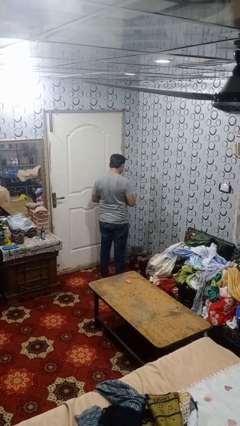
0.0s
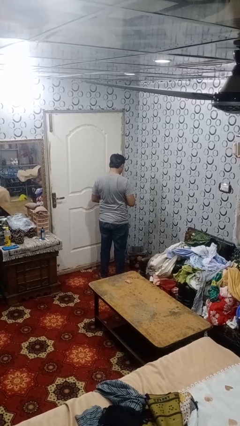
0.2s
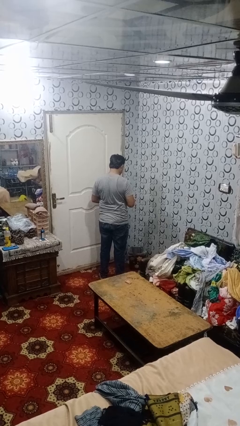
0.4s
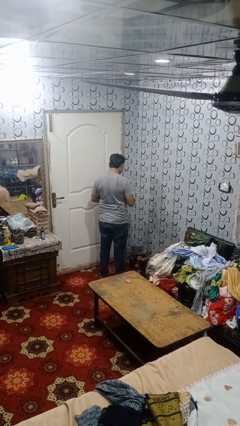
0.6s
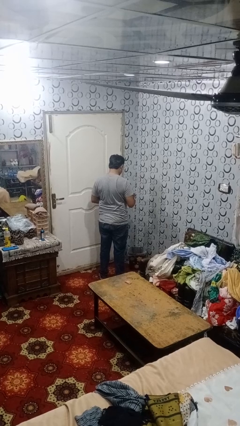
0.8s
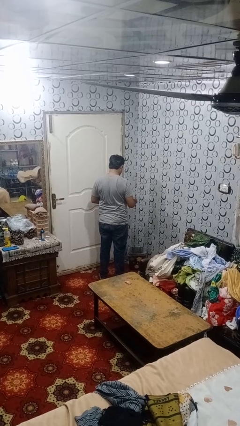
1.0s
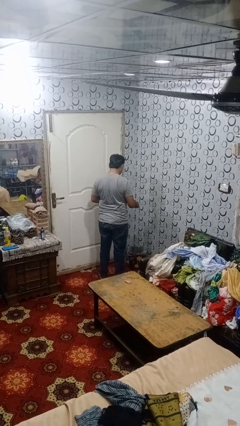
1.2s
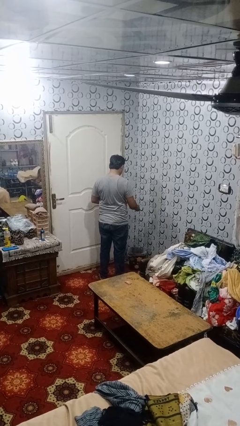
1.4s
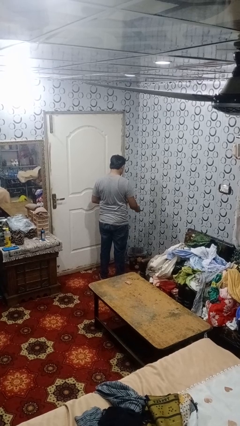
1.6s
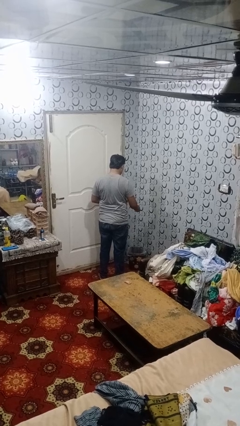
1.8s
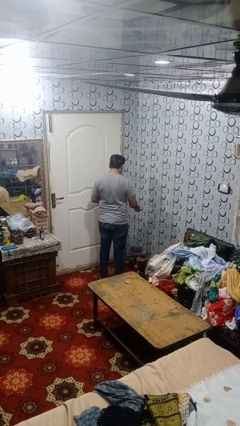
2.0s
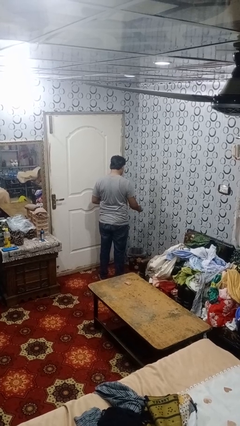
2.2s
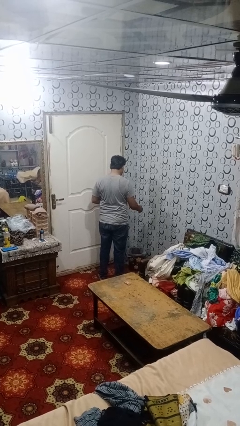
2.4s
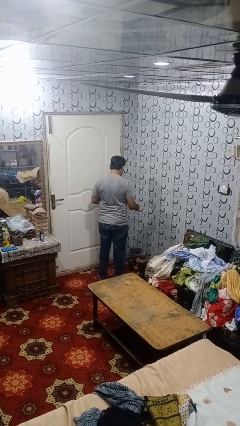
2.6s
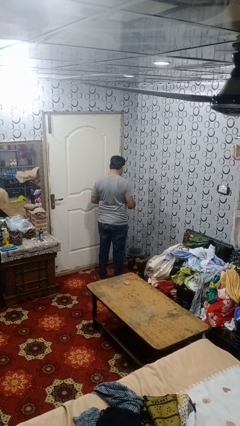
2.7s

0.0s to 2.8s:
person discards trash

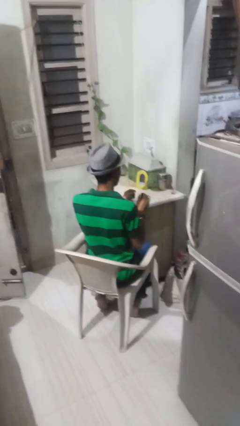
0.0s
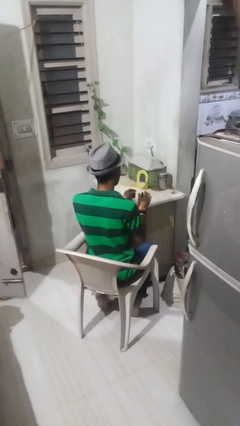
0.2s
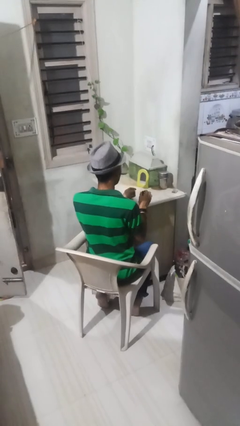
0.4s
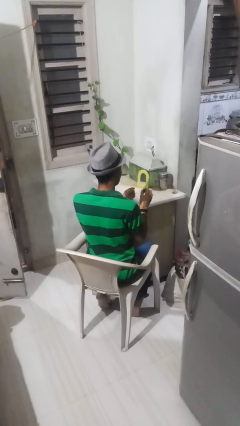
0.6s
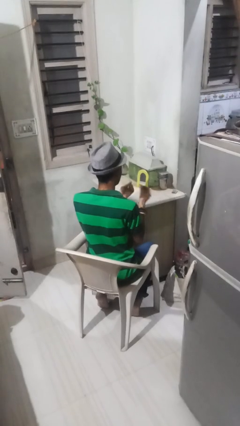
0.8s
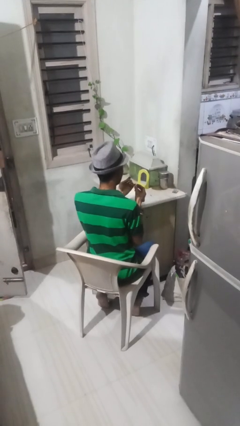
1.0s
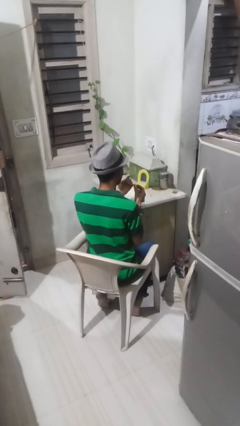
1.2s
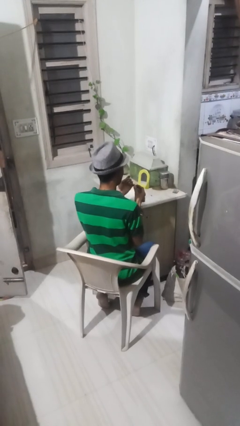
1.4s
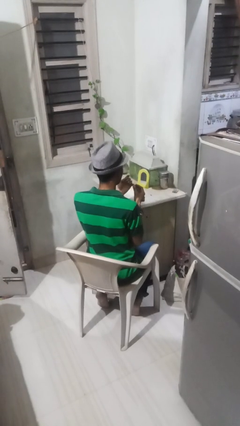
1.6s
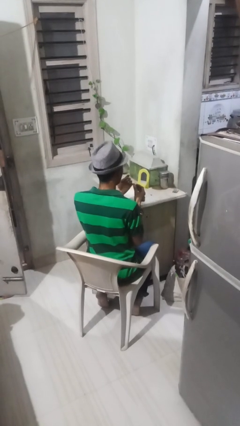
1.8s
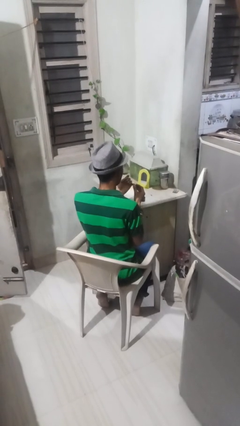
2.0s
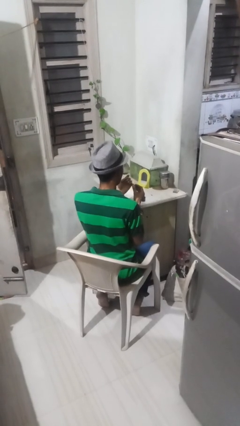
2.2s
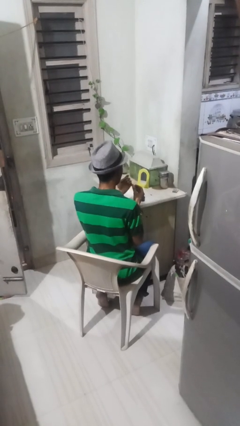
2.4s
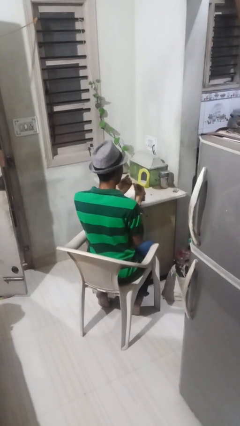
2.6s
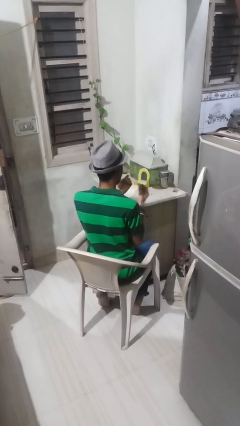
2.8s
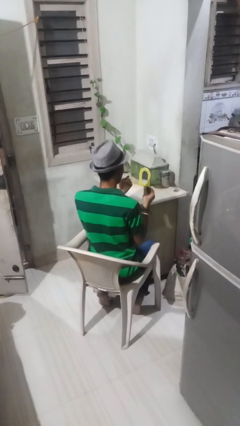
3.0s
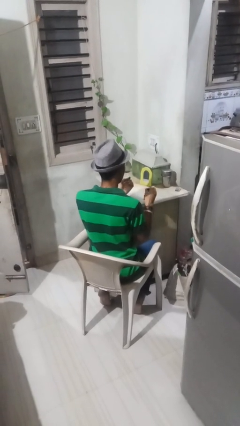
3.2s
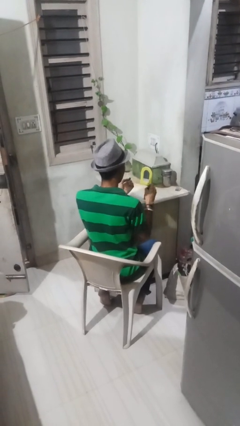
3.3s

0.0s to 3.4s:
person paints fingernails

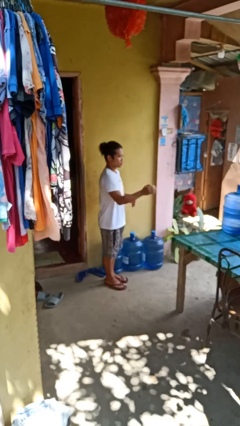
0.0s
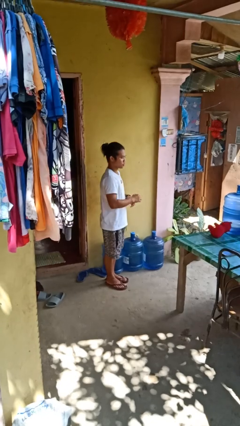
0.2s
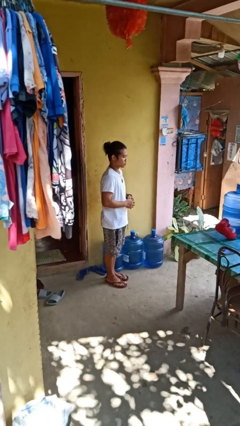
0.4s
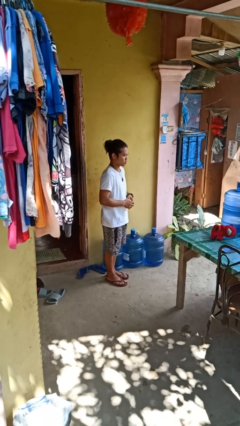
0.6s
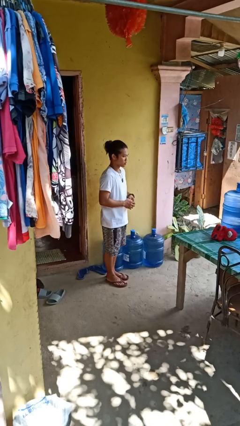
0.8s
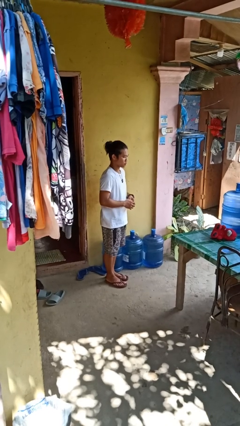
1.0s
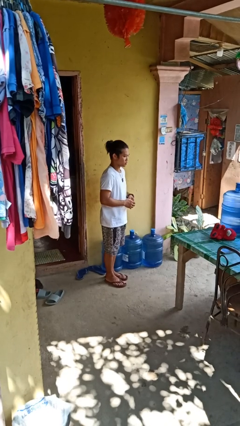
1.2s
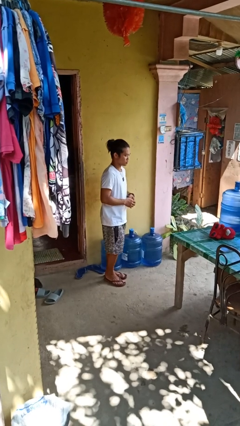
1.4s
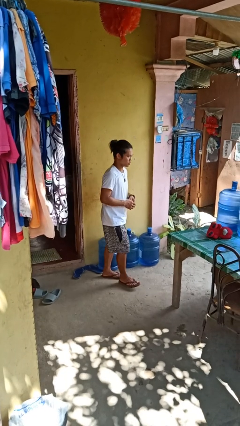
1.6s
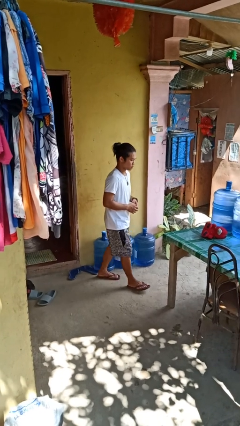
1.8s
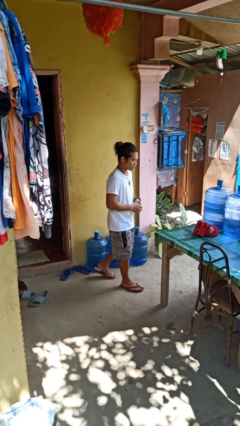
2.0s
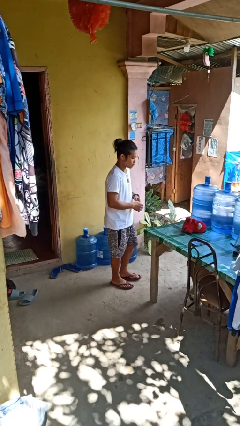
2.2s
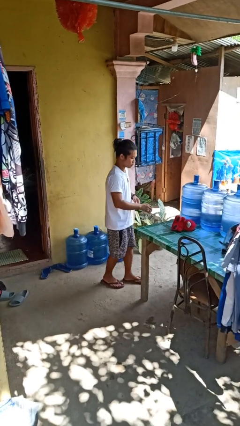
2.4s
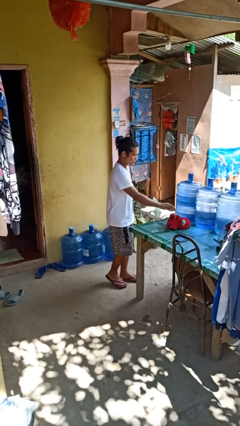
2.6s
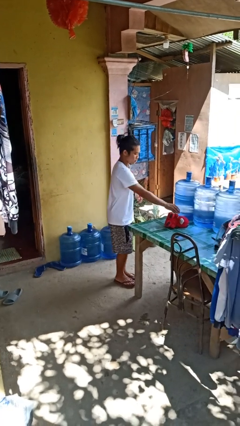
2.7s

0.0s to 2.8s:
person throws object on table

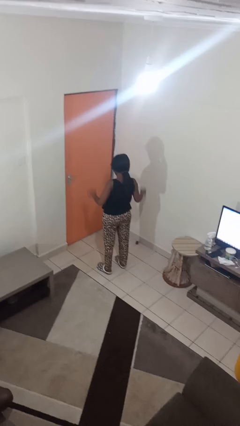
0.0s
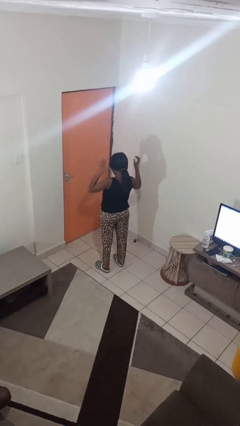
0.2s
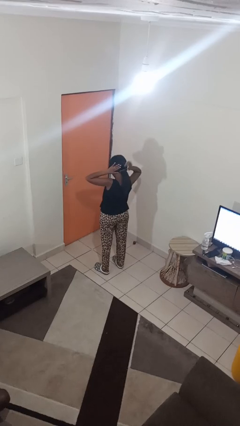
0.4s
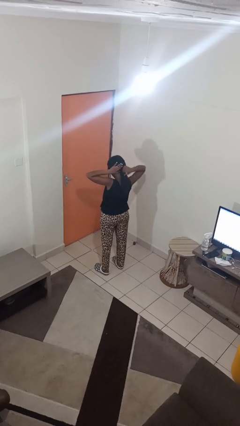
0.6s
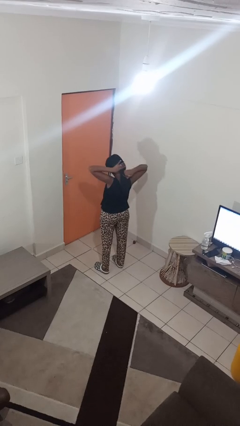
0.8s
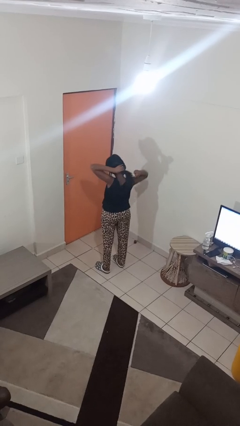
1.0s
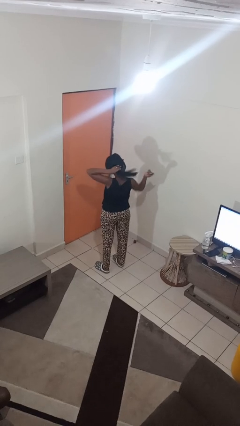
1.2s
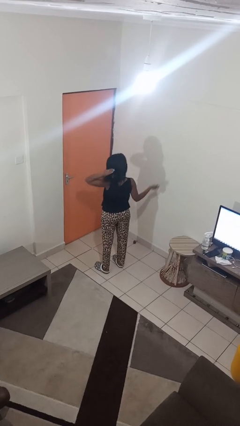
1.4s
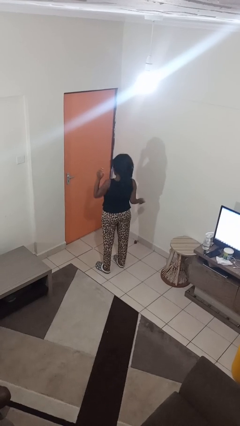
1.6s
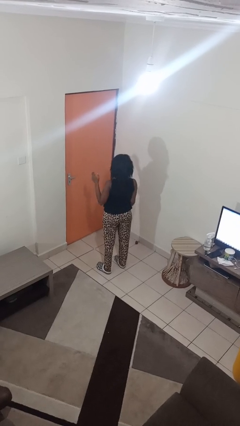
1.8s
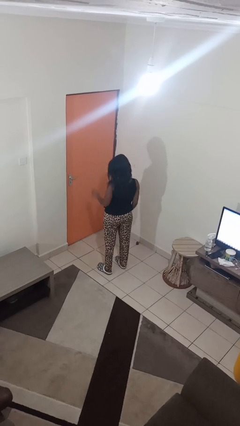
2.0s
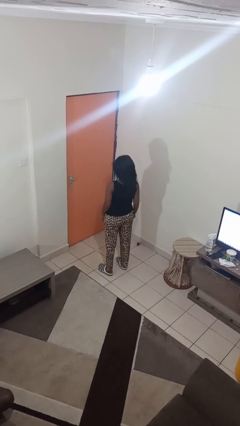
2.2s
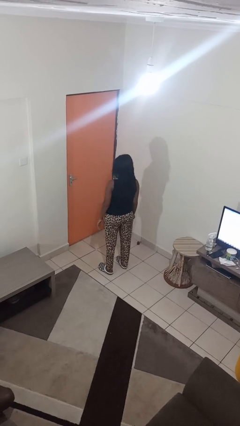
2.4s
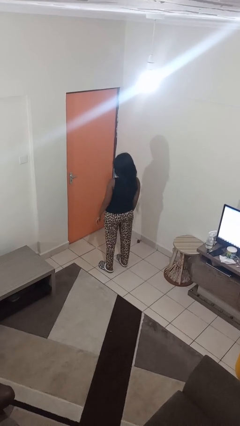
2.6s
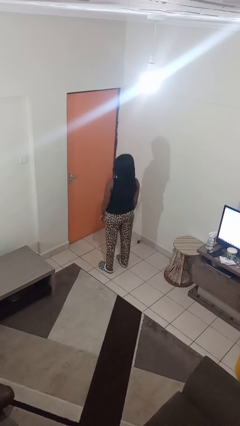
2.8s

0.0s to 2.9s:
person takes off hairtie

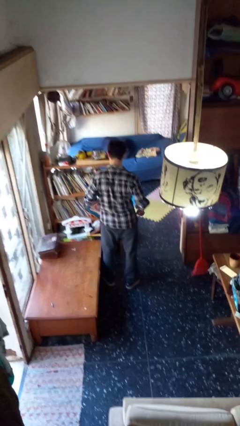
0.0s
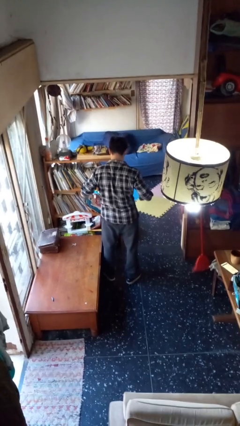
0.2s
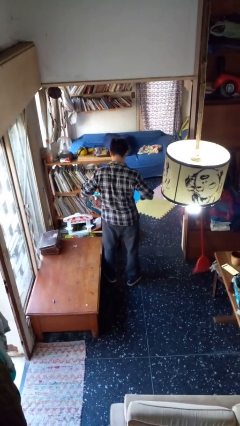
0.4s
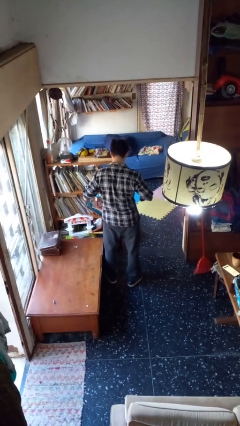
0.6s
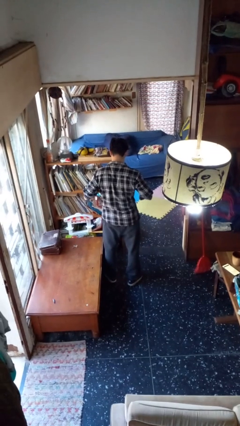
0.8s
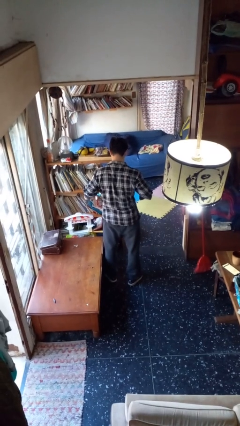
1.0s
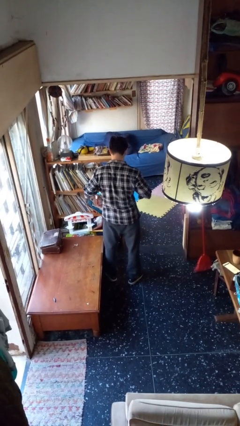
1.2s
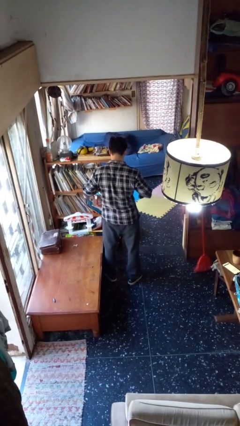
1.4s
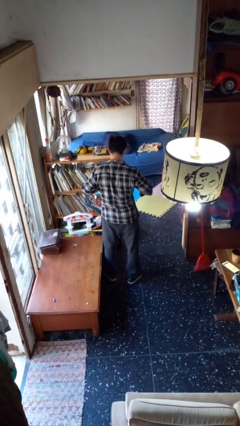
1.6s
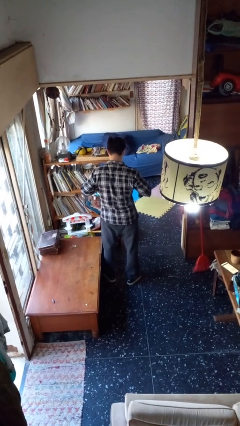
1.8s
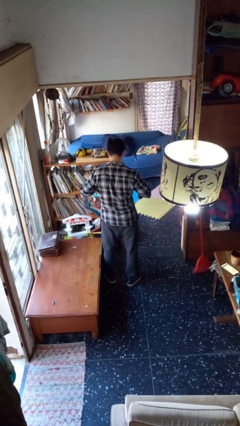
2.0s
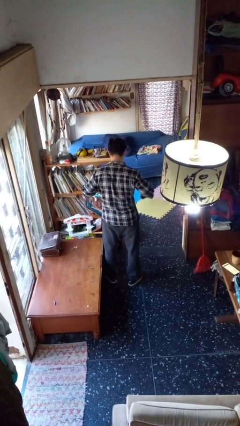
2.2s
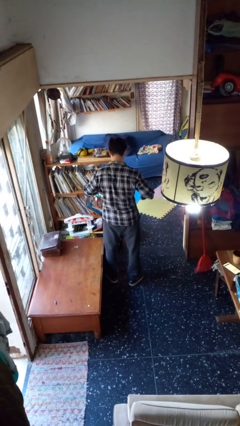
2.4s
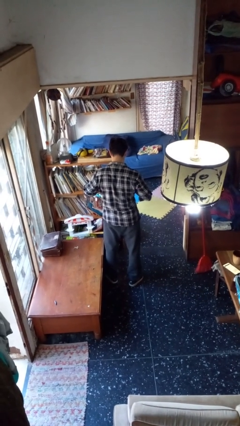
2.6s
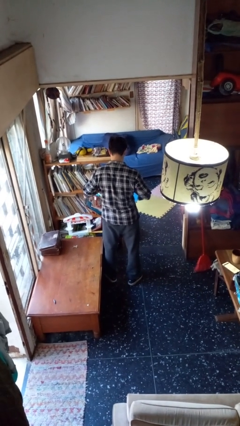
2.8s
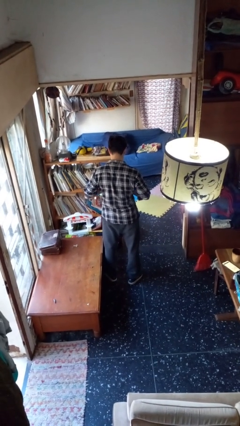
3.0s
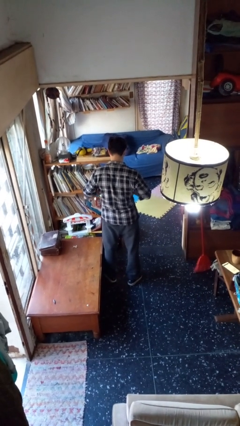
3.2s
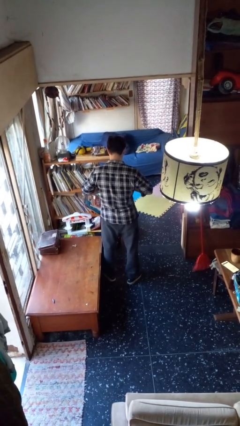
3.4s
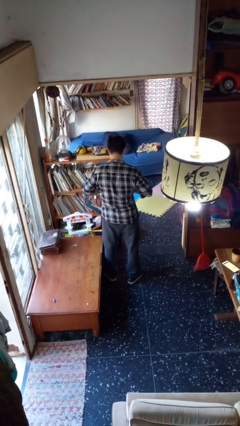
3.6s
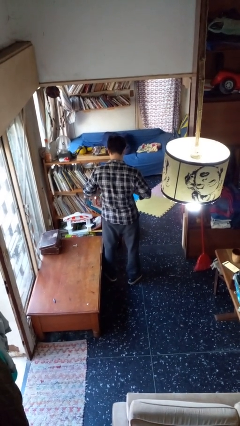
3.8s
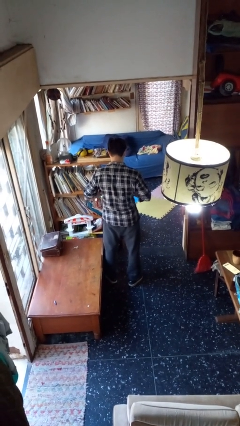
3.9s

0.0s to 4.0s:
person buttons shirt

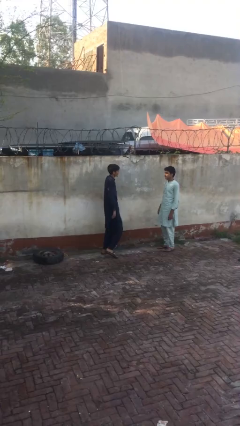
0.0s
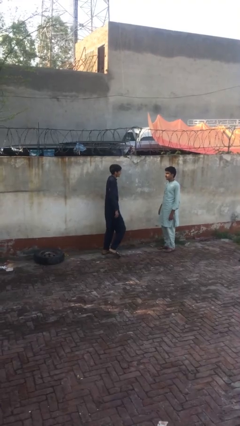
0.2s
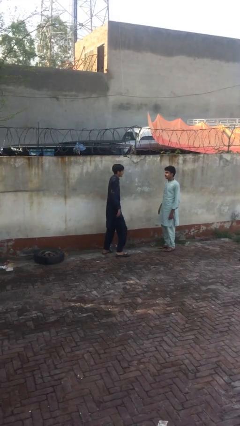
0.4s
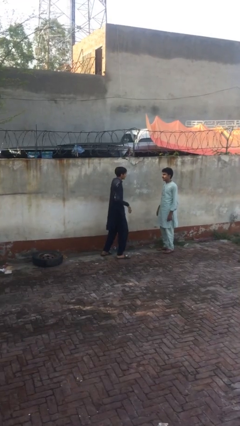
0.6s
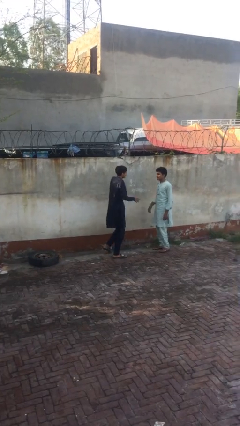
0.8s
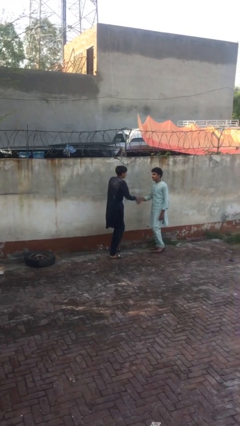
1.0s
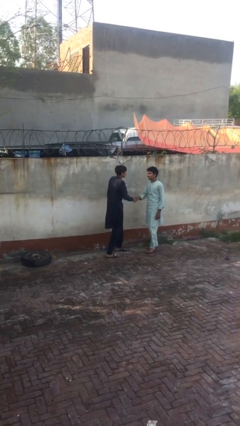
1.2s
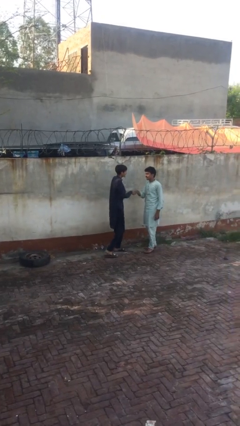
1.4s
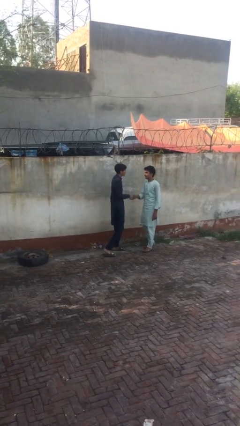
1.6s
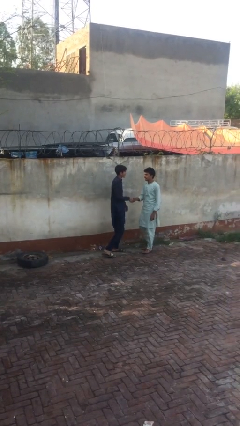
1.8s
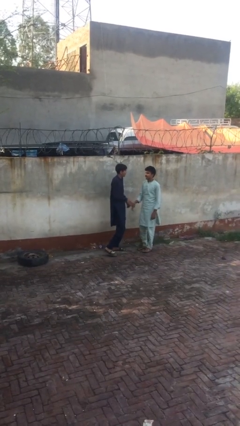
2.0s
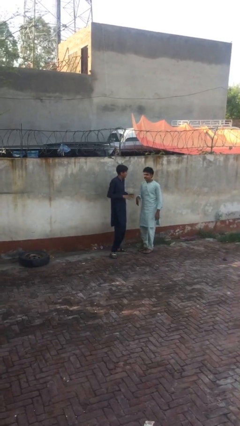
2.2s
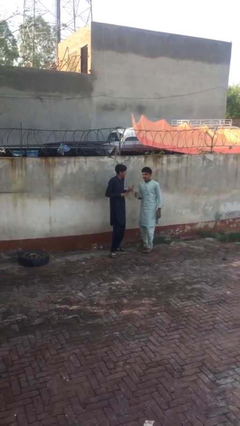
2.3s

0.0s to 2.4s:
person shakes hand
